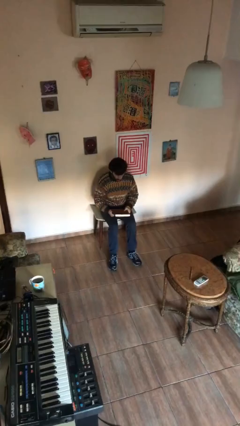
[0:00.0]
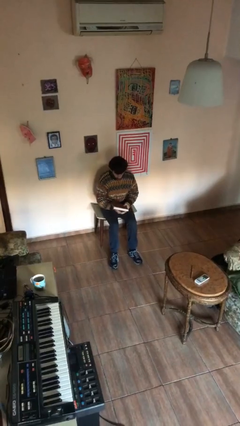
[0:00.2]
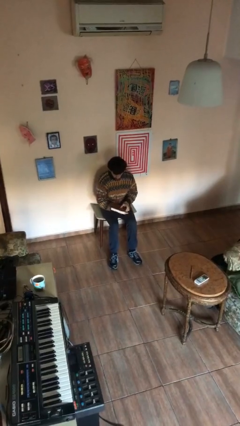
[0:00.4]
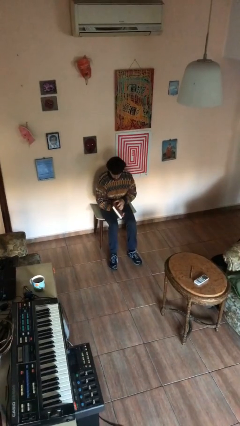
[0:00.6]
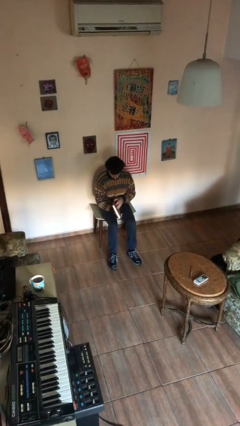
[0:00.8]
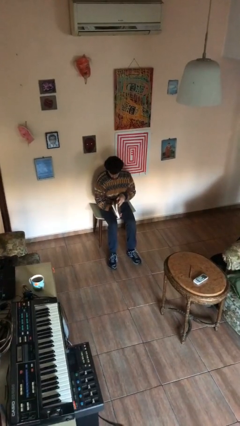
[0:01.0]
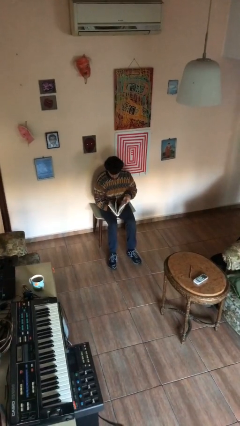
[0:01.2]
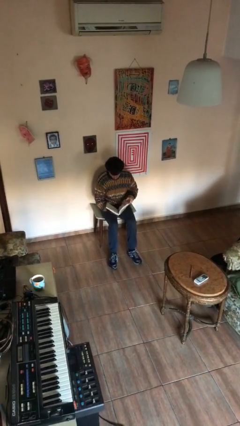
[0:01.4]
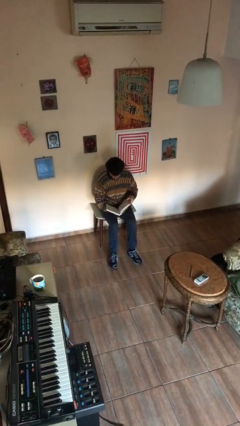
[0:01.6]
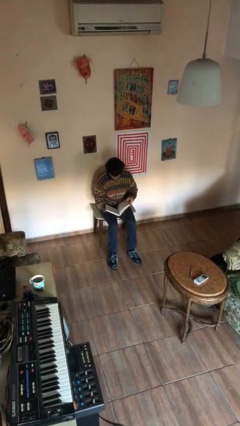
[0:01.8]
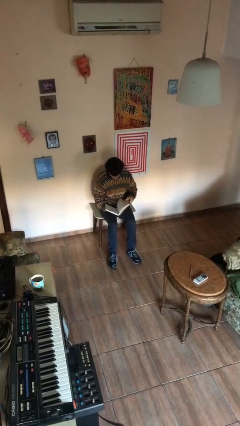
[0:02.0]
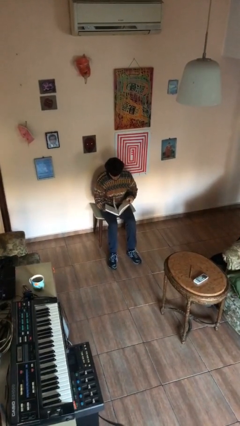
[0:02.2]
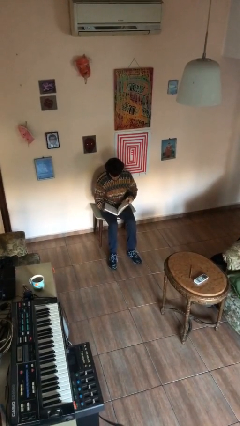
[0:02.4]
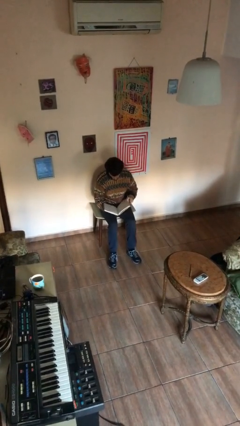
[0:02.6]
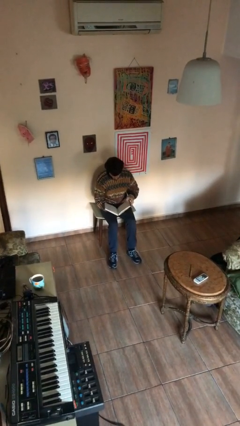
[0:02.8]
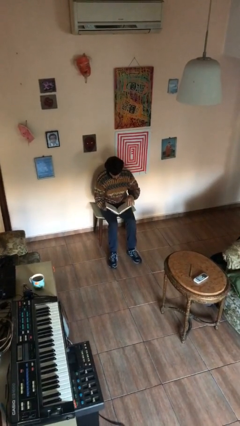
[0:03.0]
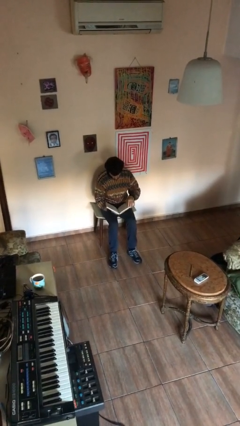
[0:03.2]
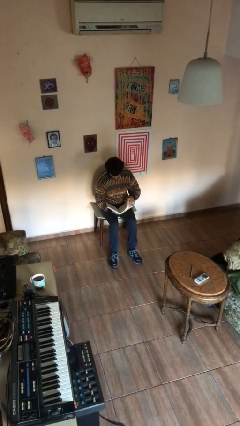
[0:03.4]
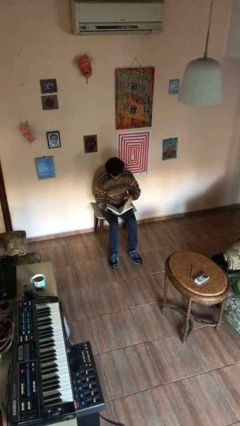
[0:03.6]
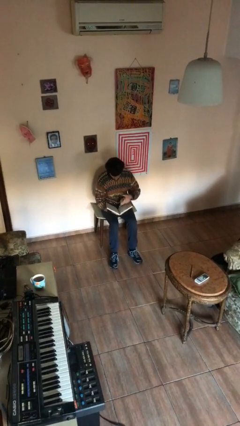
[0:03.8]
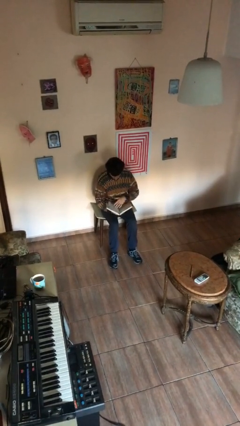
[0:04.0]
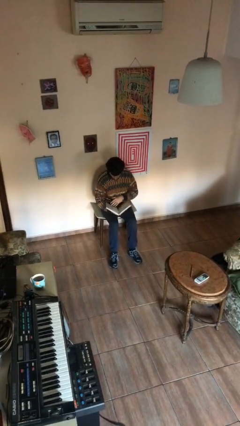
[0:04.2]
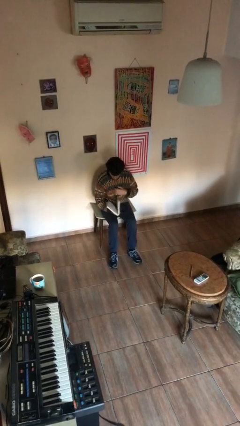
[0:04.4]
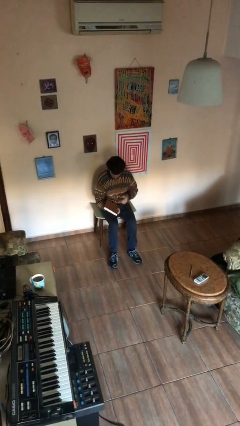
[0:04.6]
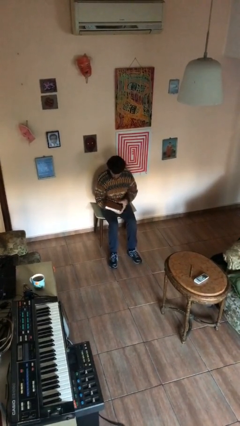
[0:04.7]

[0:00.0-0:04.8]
person reads book

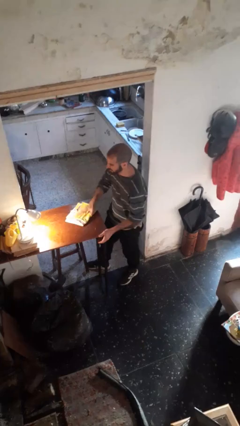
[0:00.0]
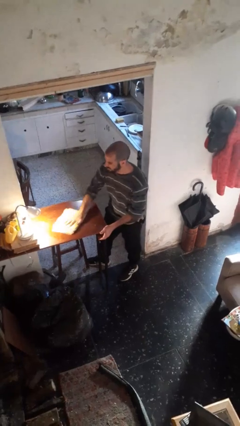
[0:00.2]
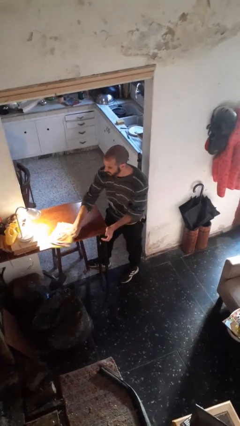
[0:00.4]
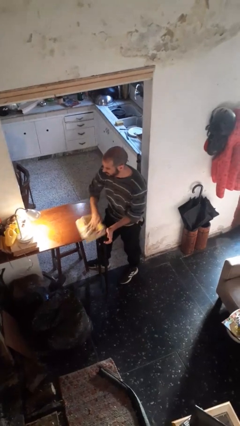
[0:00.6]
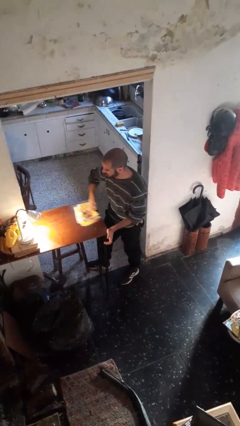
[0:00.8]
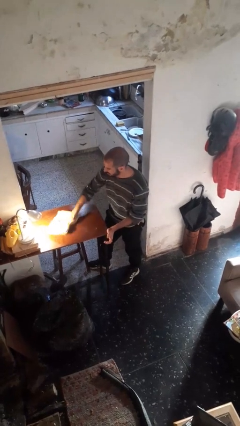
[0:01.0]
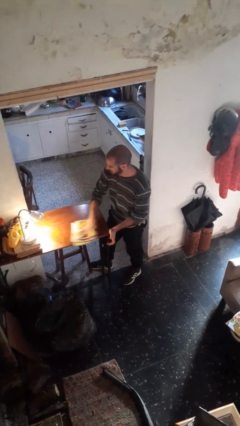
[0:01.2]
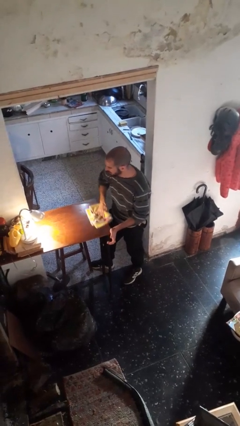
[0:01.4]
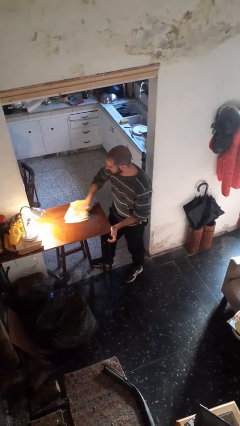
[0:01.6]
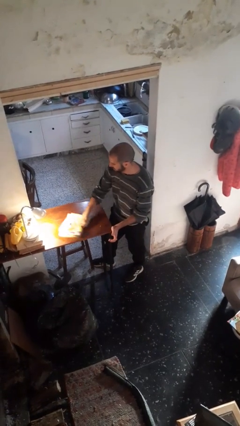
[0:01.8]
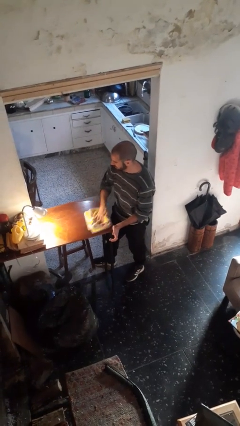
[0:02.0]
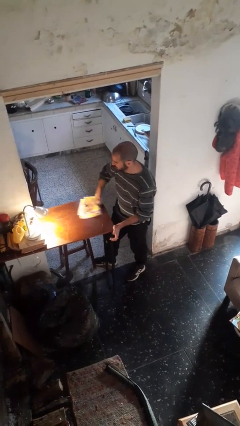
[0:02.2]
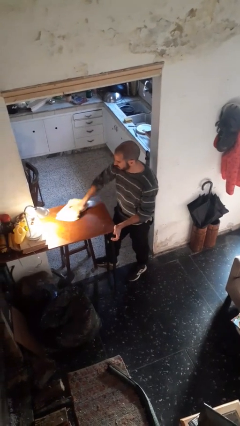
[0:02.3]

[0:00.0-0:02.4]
person cleans table with rag

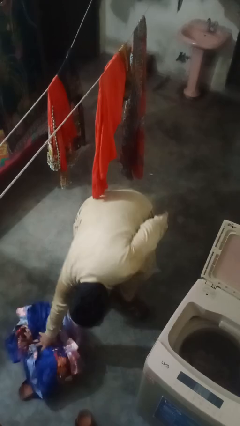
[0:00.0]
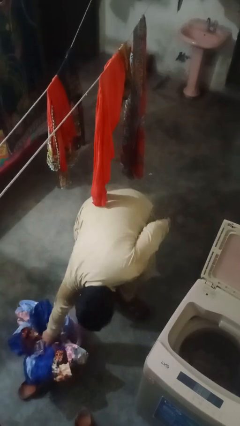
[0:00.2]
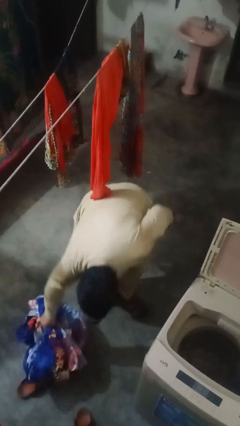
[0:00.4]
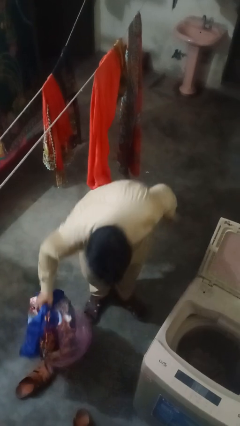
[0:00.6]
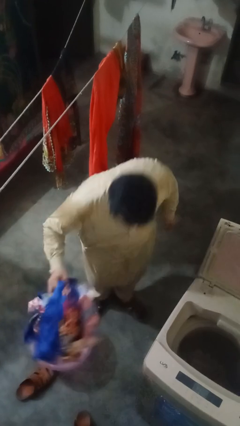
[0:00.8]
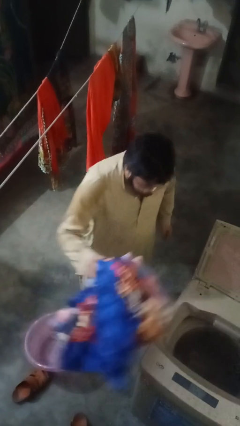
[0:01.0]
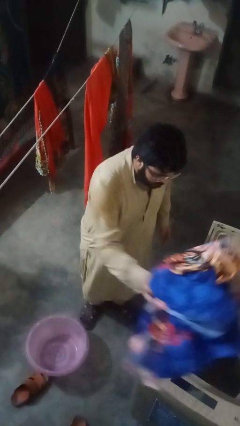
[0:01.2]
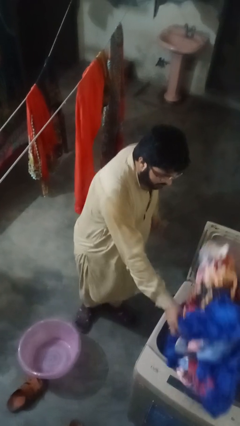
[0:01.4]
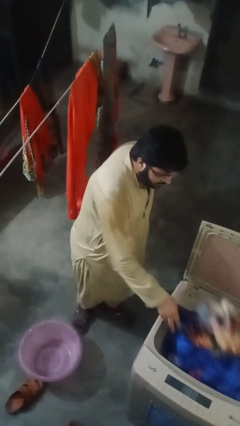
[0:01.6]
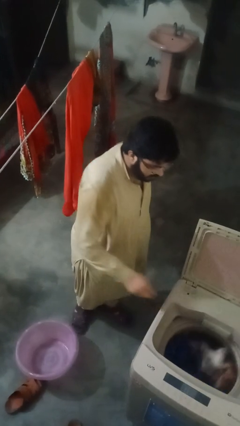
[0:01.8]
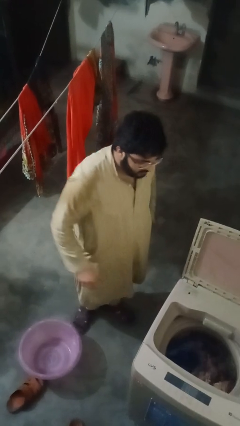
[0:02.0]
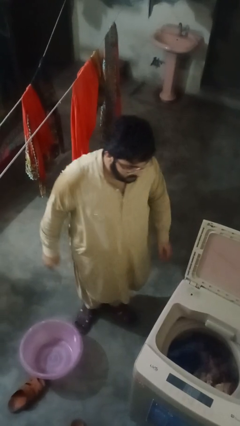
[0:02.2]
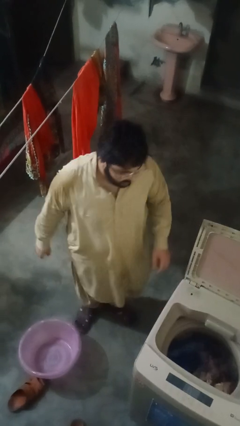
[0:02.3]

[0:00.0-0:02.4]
person loads clotheswasher

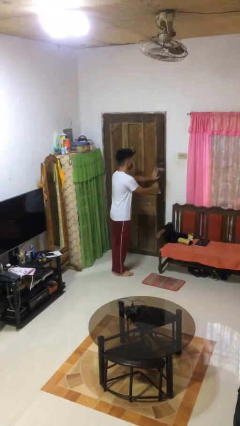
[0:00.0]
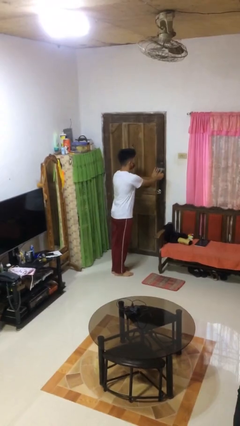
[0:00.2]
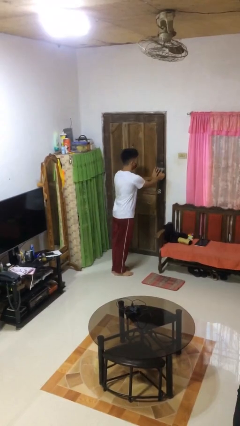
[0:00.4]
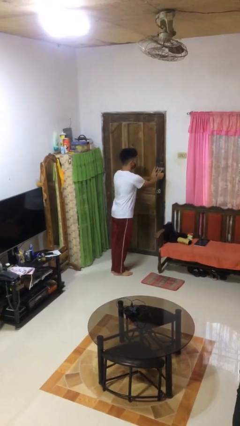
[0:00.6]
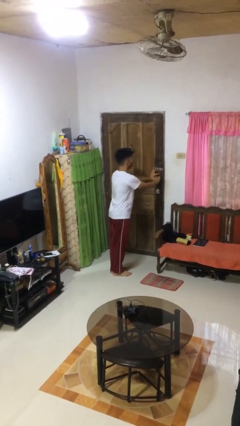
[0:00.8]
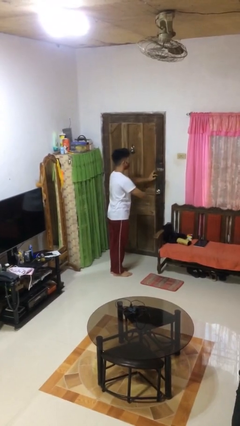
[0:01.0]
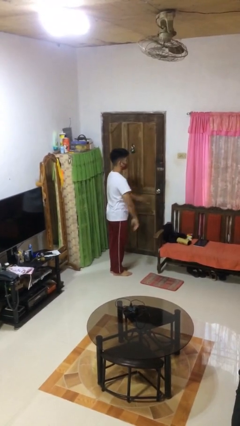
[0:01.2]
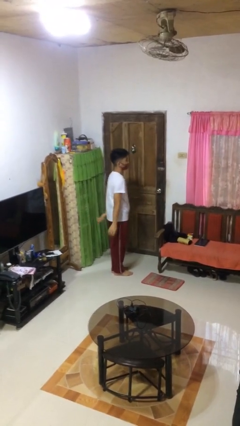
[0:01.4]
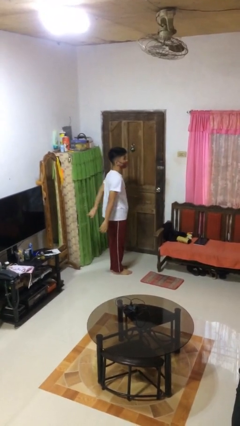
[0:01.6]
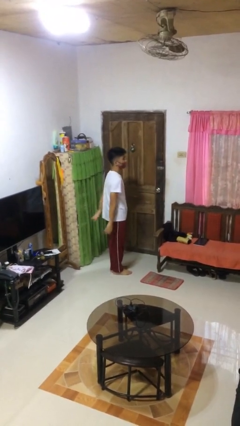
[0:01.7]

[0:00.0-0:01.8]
person locks door with keys

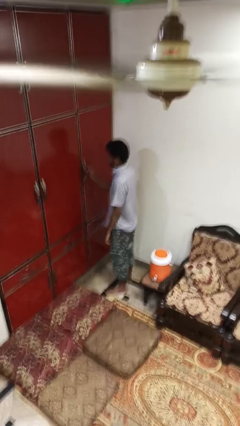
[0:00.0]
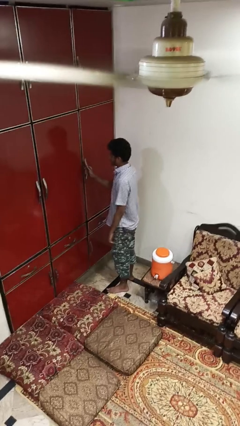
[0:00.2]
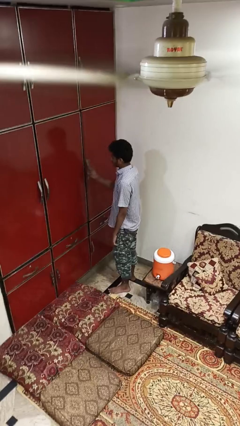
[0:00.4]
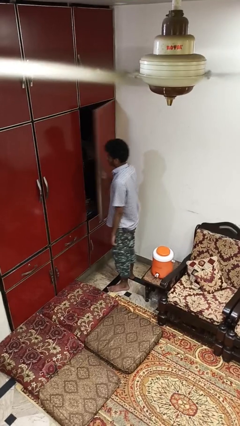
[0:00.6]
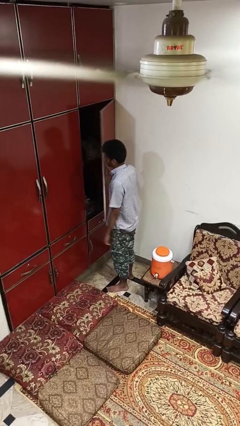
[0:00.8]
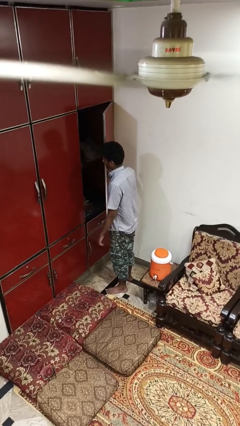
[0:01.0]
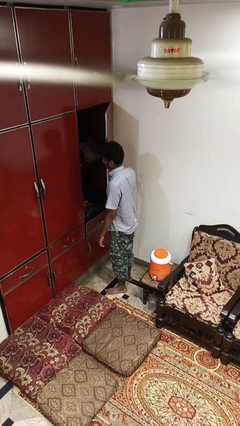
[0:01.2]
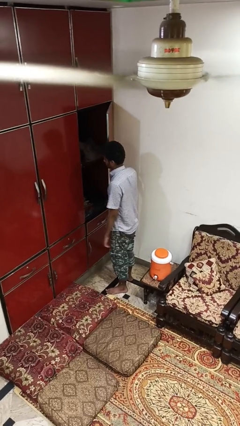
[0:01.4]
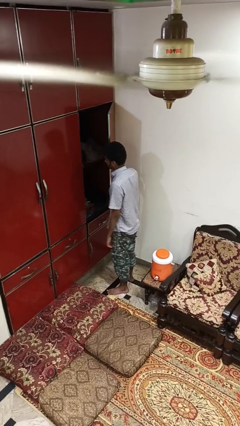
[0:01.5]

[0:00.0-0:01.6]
person closes cabinet

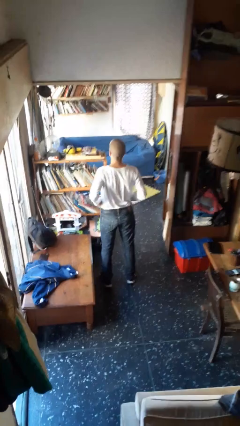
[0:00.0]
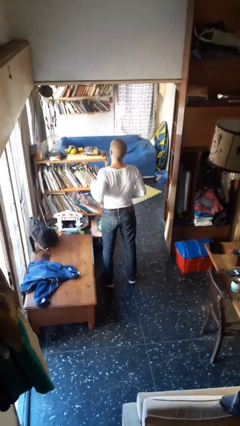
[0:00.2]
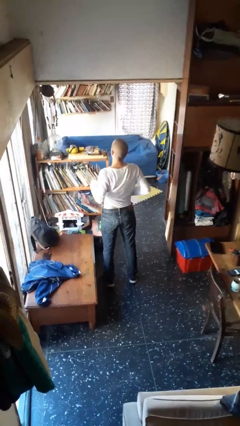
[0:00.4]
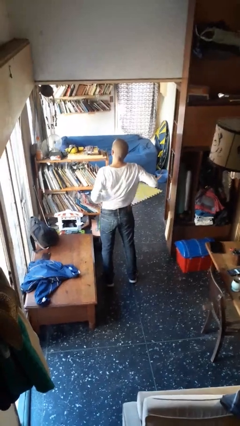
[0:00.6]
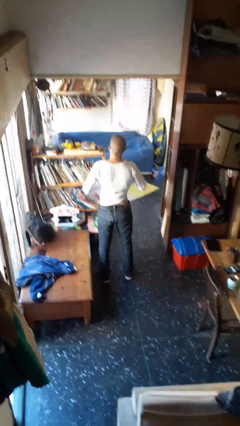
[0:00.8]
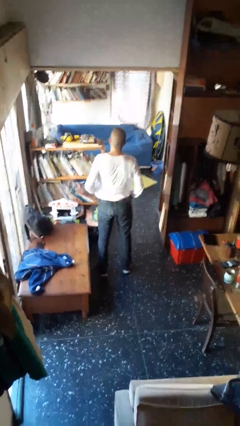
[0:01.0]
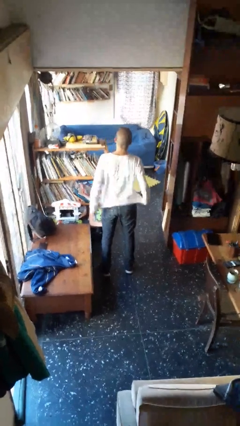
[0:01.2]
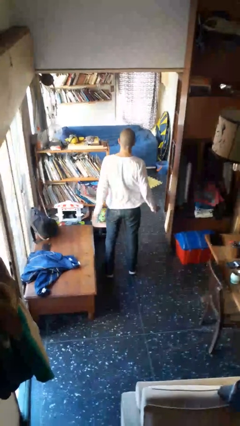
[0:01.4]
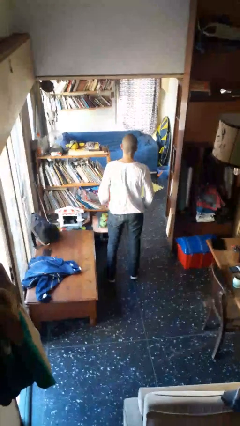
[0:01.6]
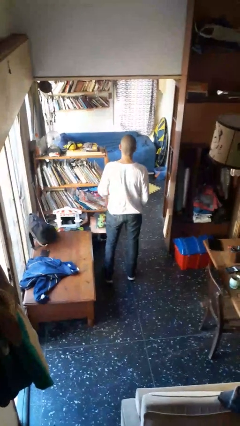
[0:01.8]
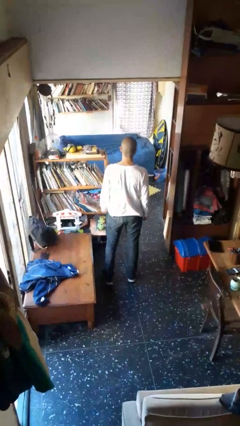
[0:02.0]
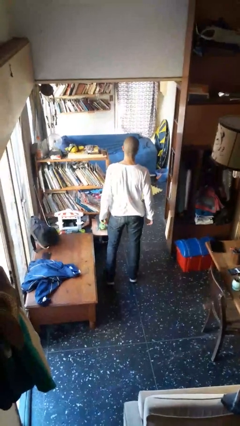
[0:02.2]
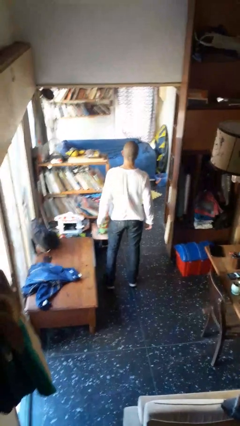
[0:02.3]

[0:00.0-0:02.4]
person untucks shirt

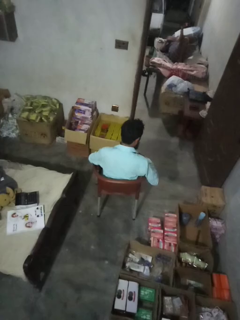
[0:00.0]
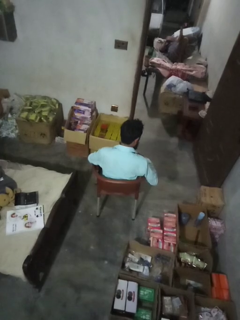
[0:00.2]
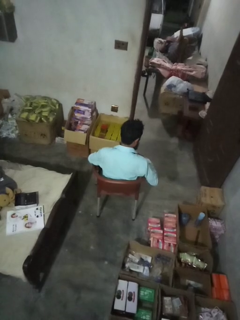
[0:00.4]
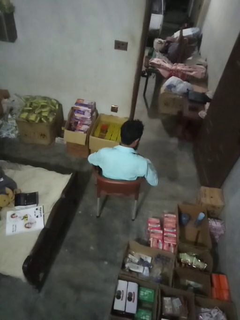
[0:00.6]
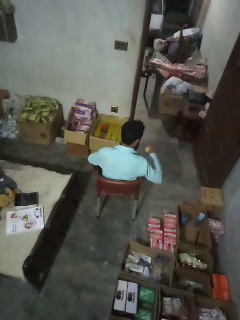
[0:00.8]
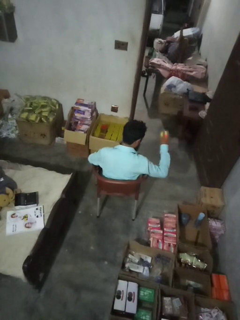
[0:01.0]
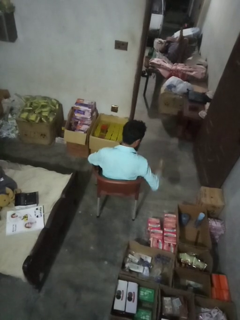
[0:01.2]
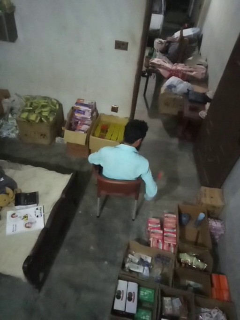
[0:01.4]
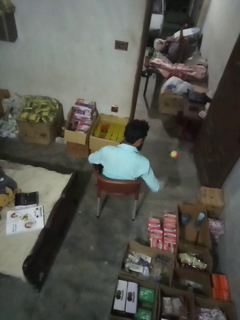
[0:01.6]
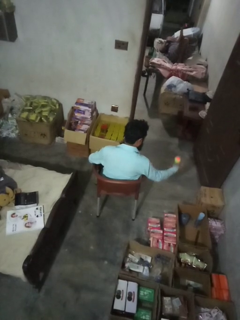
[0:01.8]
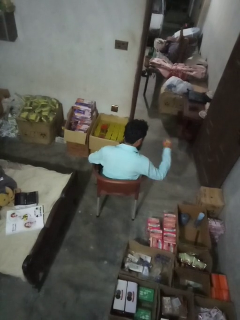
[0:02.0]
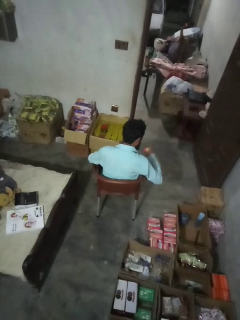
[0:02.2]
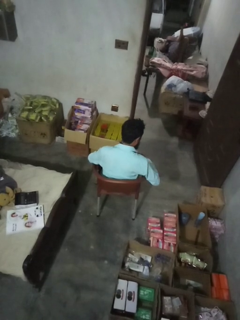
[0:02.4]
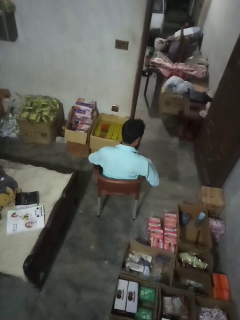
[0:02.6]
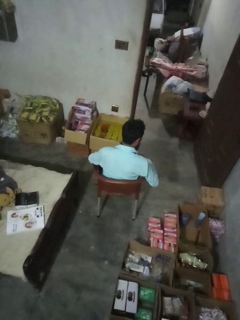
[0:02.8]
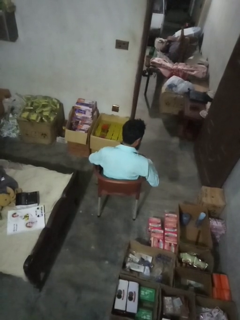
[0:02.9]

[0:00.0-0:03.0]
person bounces ball on floor
